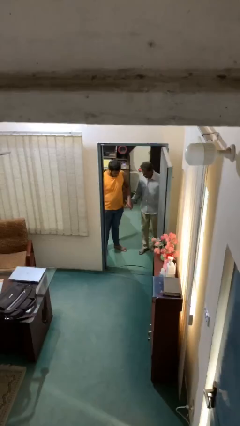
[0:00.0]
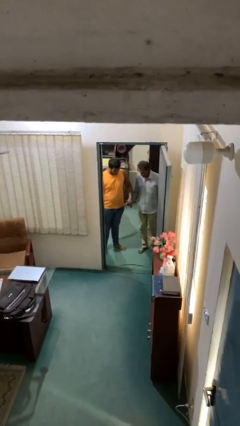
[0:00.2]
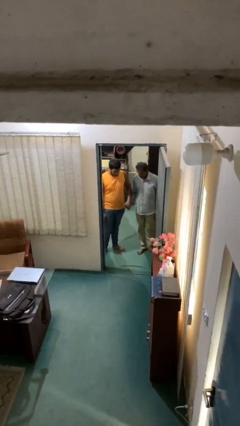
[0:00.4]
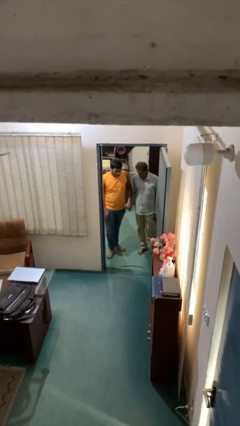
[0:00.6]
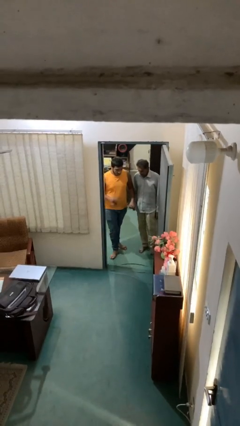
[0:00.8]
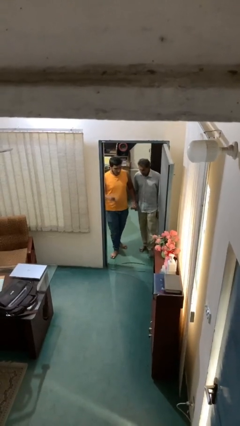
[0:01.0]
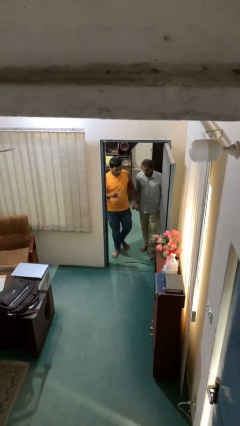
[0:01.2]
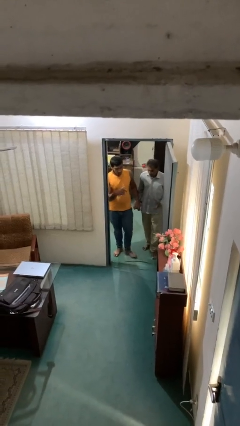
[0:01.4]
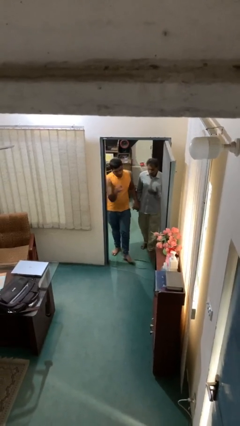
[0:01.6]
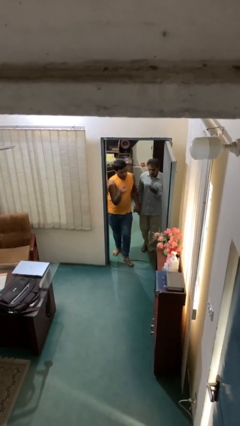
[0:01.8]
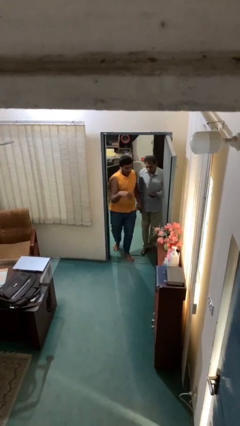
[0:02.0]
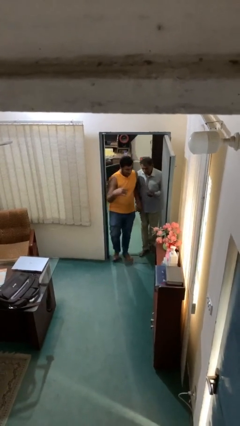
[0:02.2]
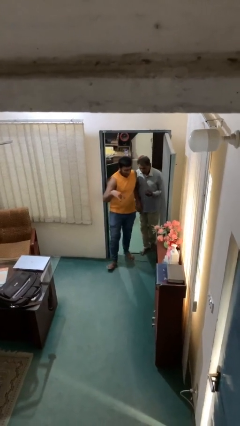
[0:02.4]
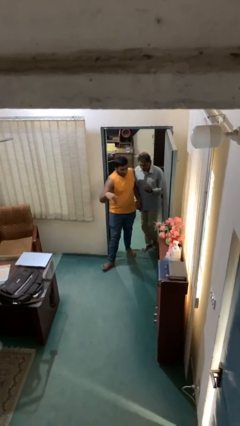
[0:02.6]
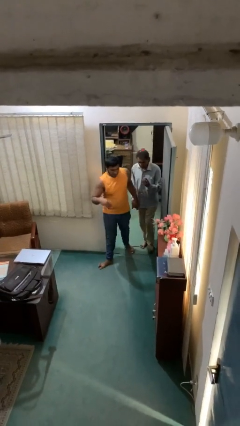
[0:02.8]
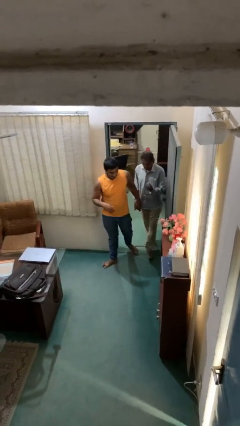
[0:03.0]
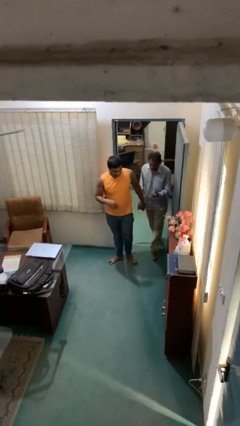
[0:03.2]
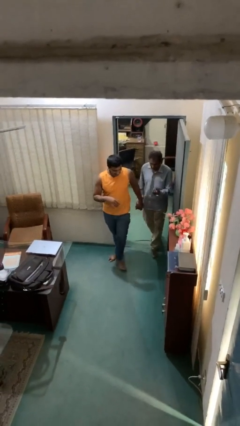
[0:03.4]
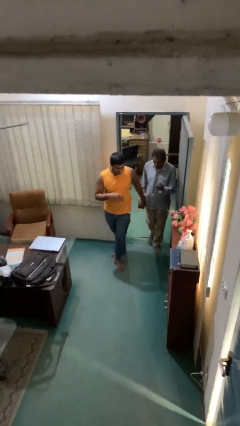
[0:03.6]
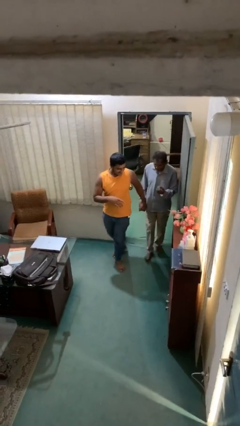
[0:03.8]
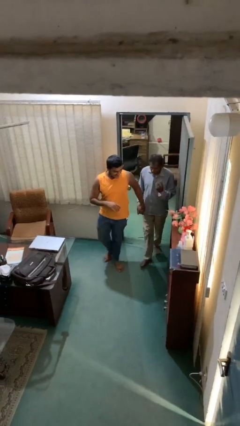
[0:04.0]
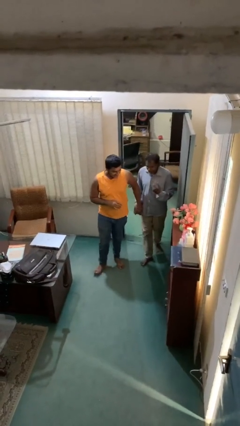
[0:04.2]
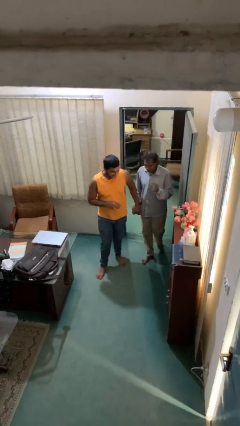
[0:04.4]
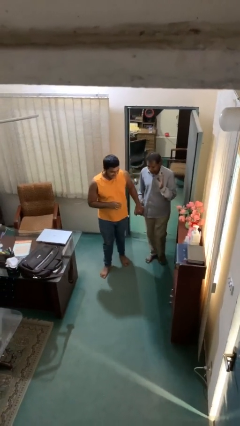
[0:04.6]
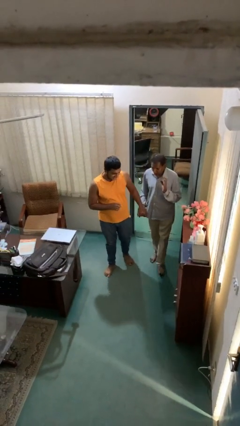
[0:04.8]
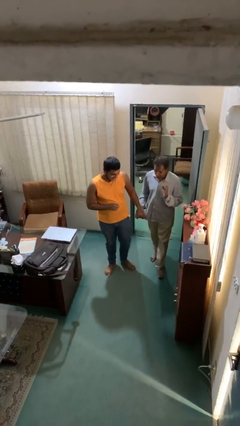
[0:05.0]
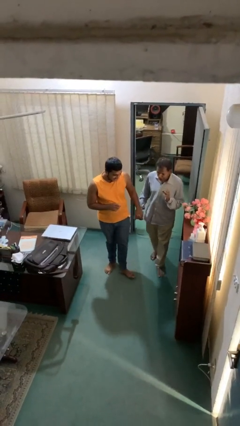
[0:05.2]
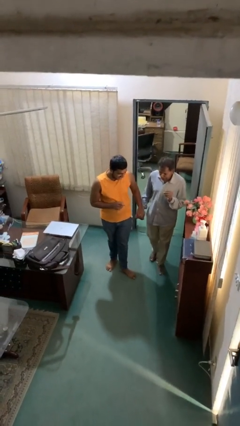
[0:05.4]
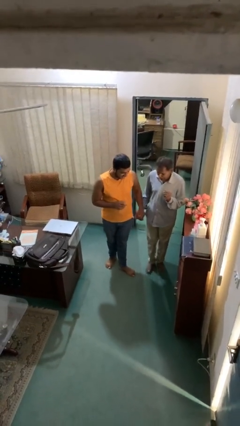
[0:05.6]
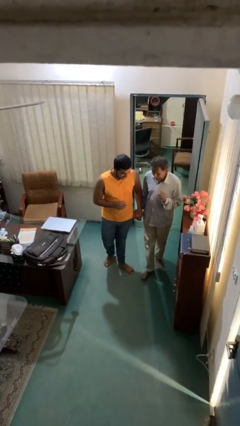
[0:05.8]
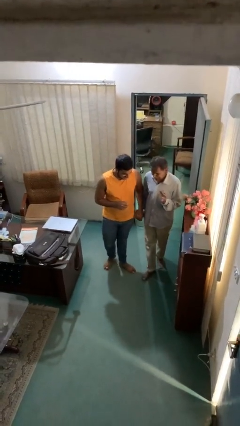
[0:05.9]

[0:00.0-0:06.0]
person holds hand

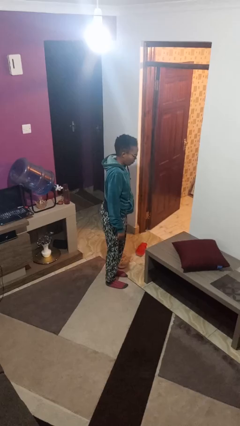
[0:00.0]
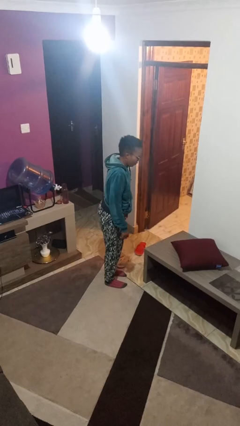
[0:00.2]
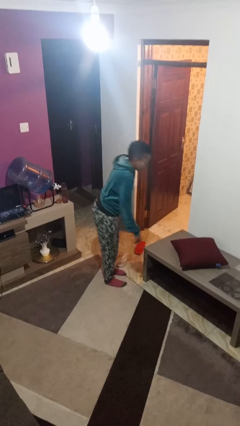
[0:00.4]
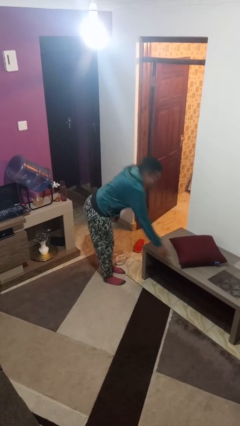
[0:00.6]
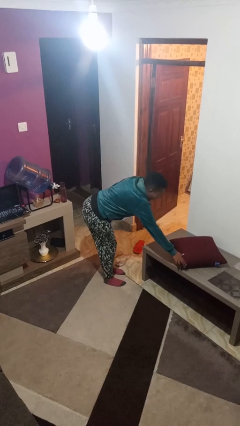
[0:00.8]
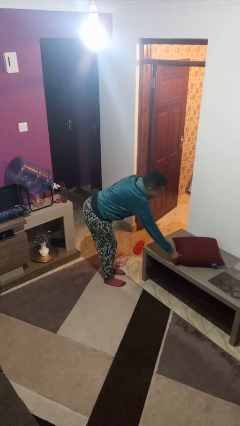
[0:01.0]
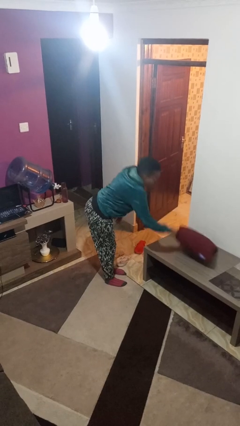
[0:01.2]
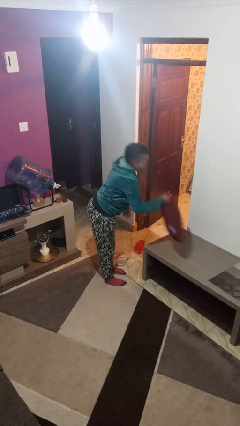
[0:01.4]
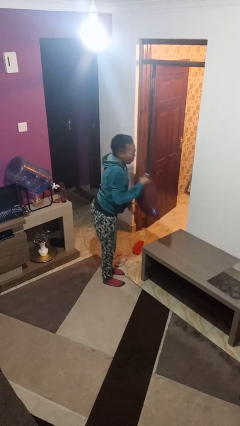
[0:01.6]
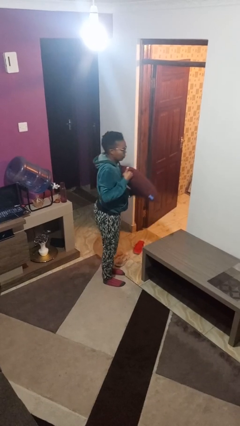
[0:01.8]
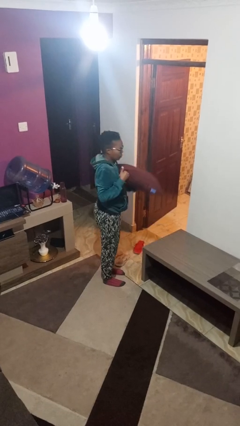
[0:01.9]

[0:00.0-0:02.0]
person picks up object from table

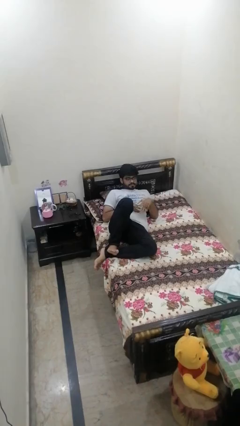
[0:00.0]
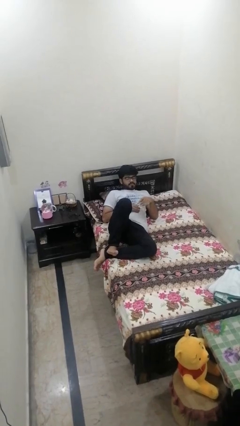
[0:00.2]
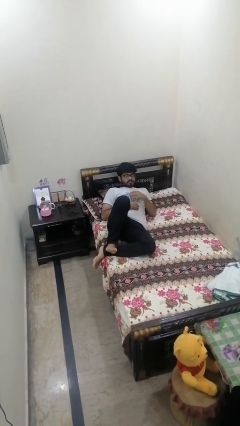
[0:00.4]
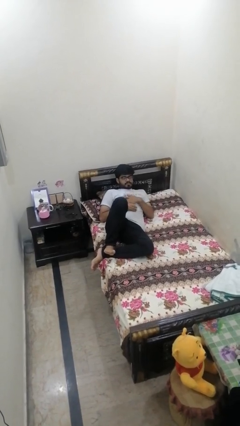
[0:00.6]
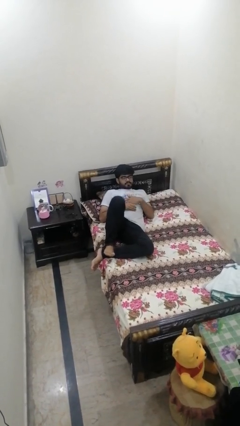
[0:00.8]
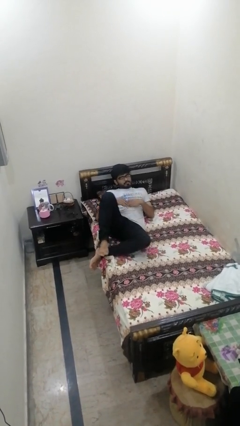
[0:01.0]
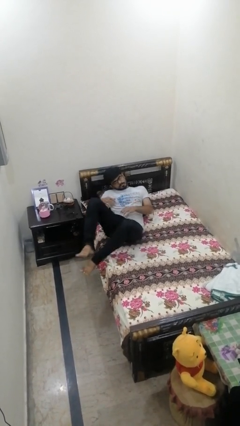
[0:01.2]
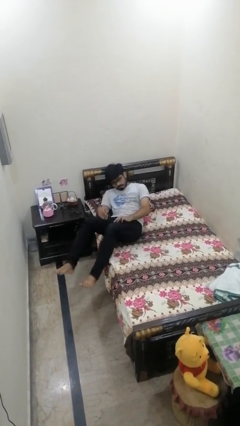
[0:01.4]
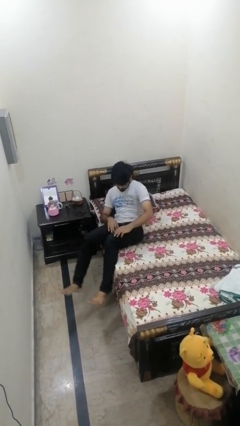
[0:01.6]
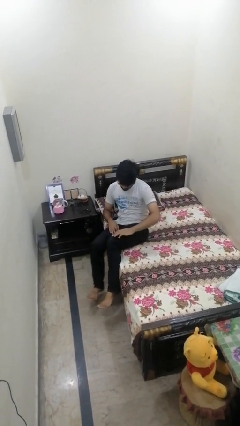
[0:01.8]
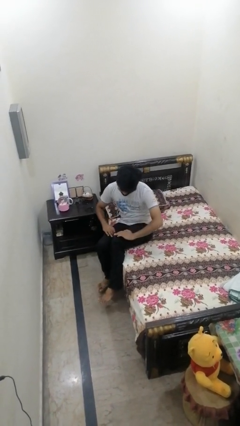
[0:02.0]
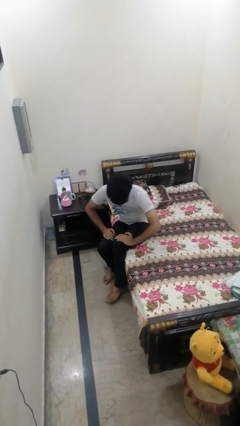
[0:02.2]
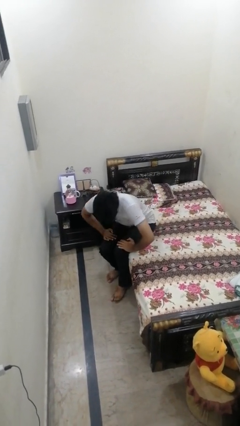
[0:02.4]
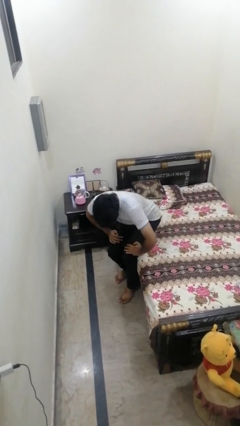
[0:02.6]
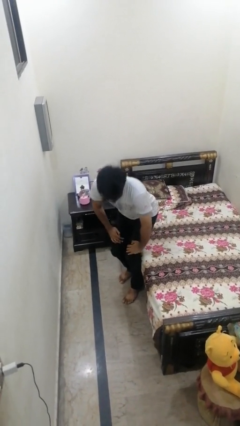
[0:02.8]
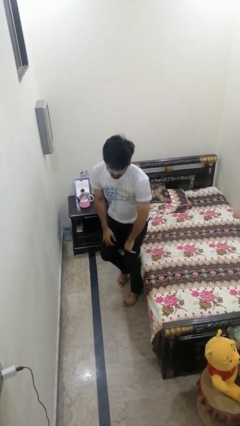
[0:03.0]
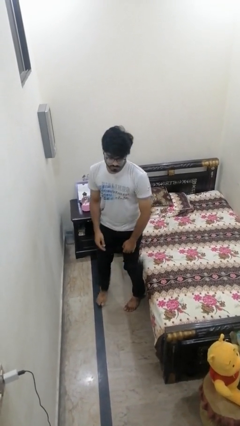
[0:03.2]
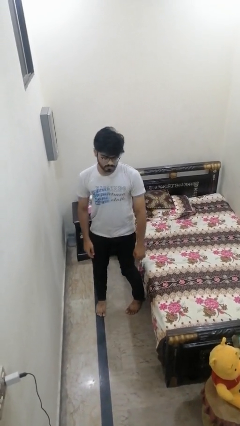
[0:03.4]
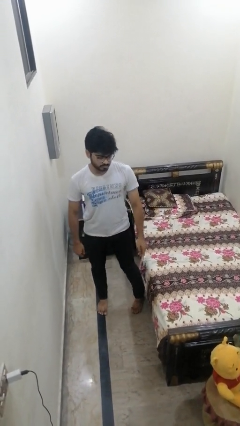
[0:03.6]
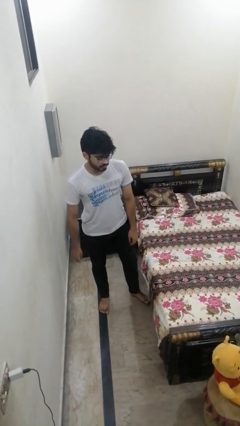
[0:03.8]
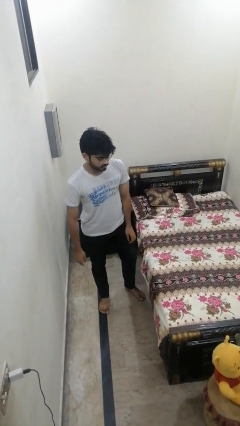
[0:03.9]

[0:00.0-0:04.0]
person stands up

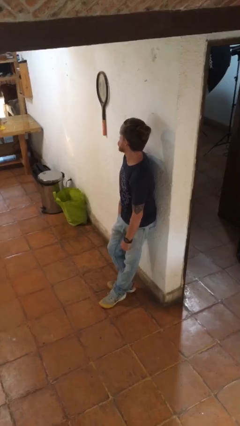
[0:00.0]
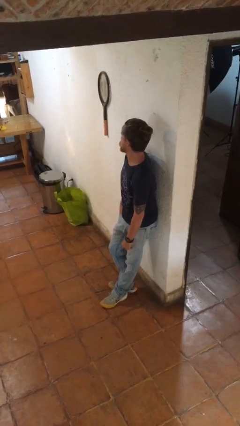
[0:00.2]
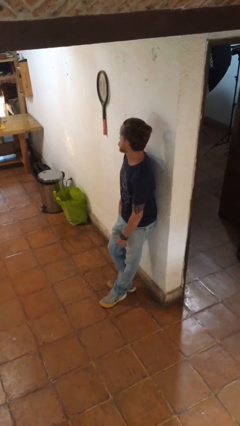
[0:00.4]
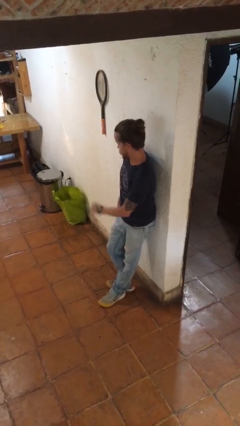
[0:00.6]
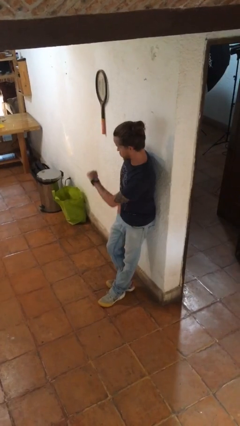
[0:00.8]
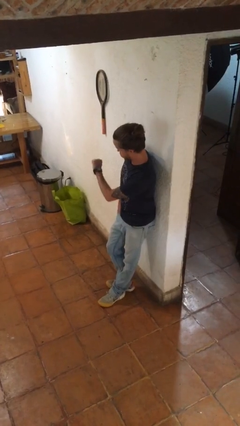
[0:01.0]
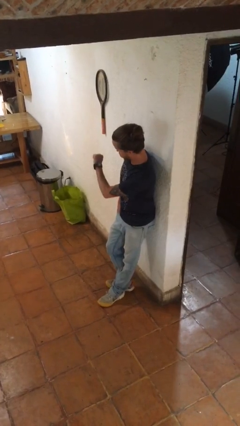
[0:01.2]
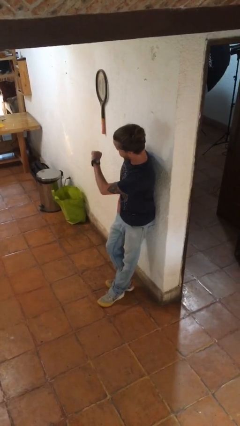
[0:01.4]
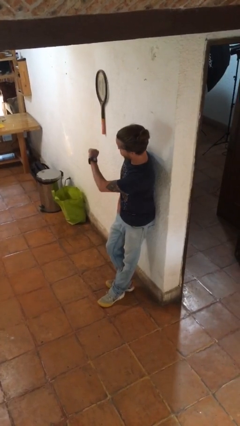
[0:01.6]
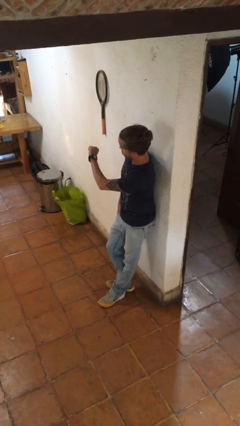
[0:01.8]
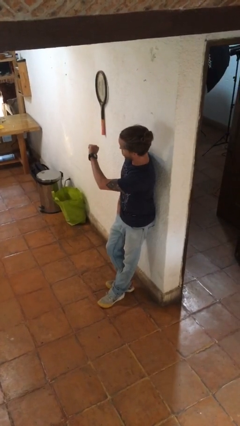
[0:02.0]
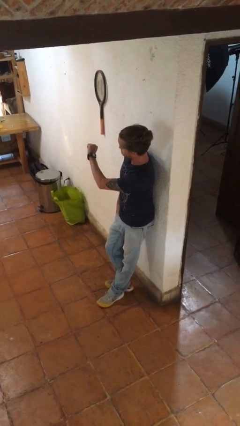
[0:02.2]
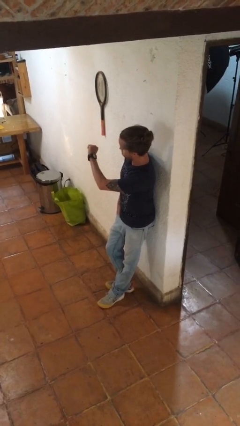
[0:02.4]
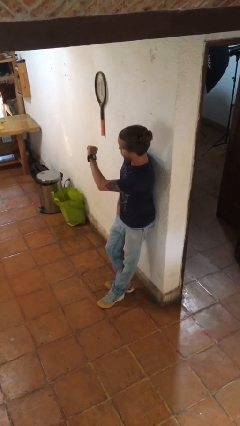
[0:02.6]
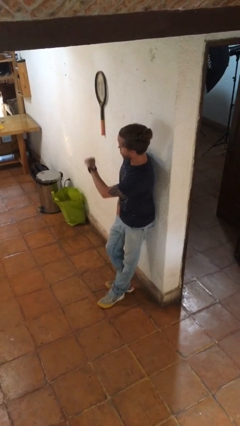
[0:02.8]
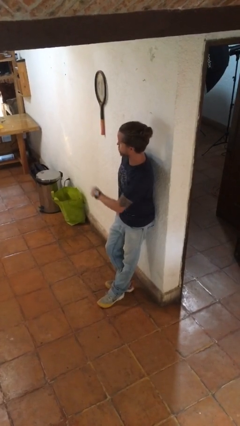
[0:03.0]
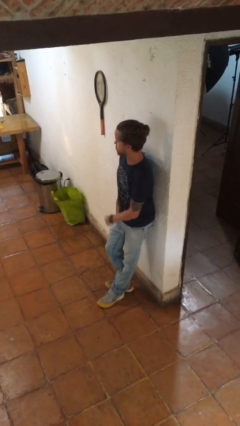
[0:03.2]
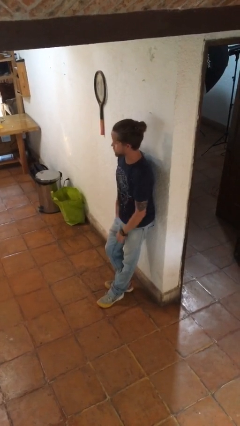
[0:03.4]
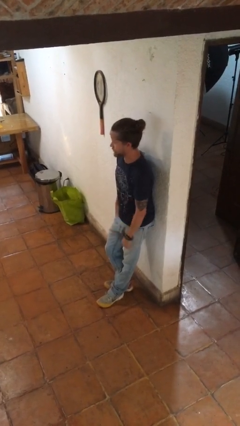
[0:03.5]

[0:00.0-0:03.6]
person looks at wristwatch

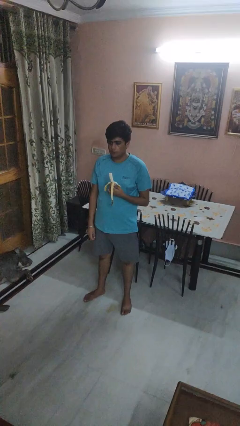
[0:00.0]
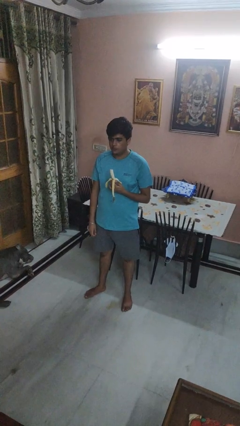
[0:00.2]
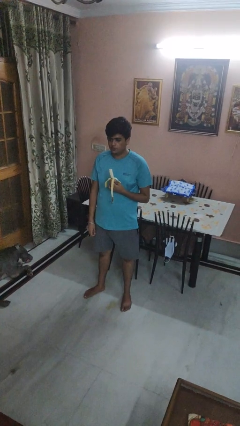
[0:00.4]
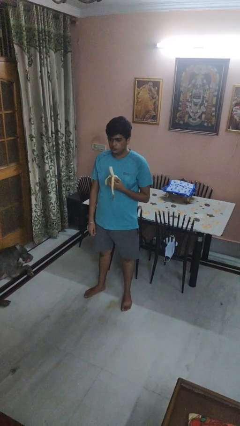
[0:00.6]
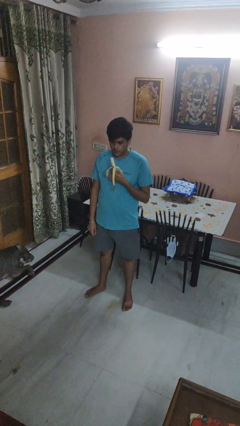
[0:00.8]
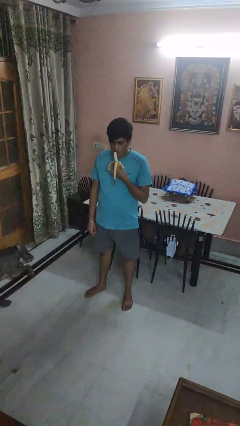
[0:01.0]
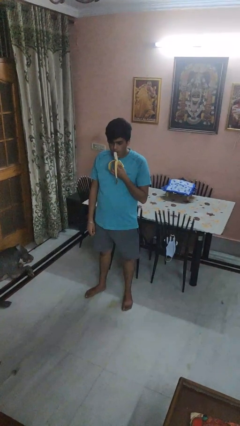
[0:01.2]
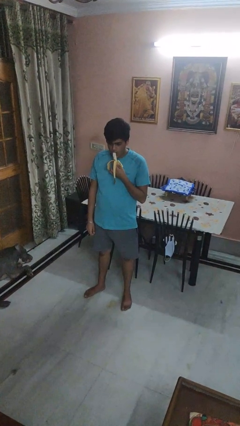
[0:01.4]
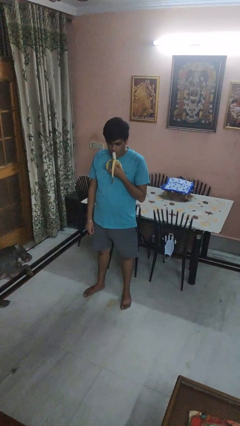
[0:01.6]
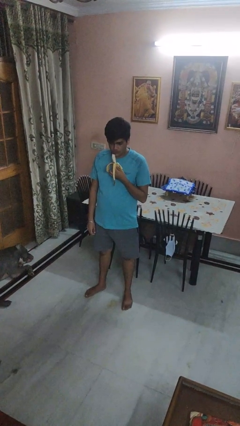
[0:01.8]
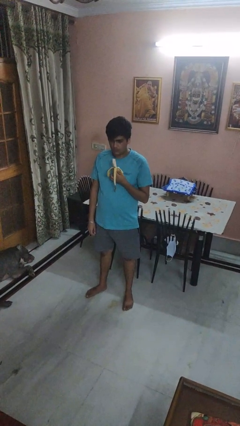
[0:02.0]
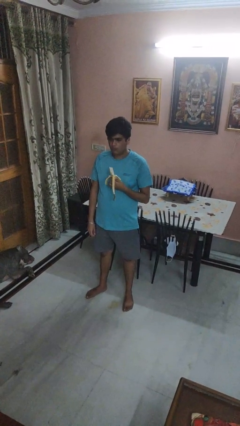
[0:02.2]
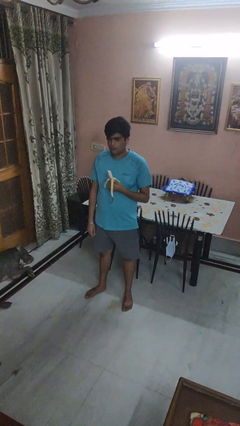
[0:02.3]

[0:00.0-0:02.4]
person eats banana
